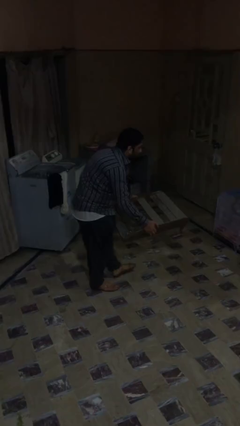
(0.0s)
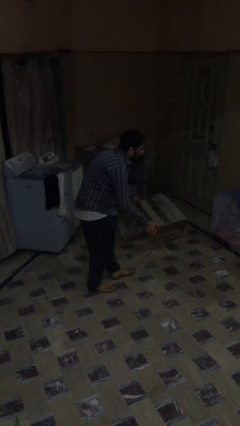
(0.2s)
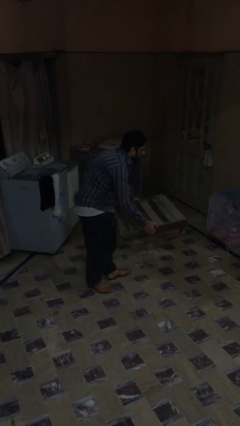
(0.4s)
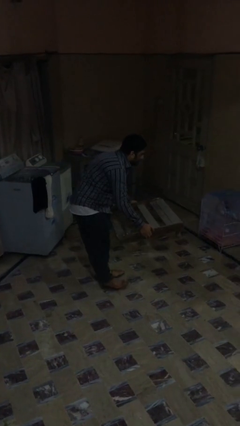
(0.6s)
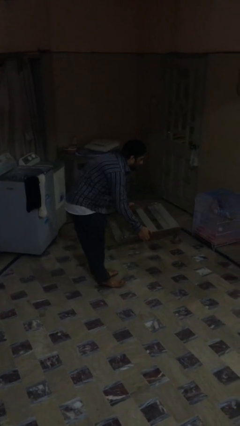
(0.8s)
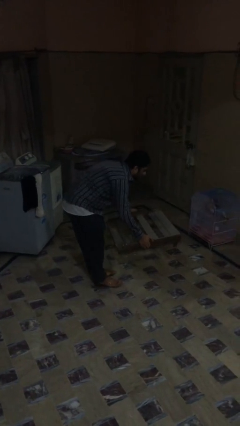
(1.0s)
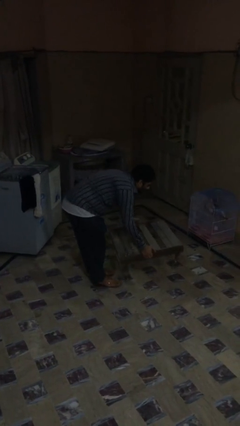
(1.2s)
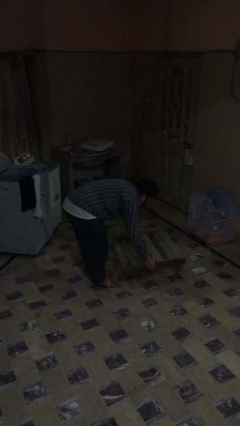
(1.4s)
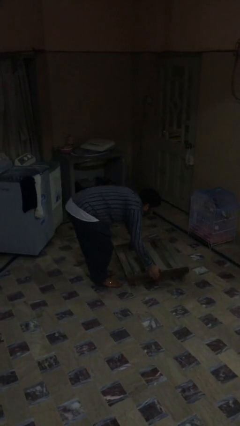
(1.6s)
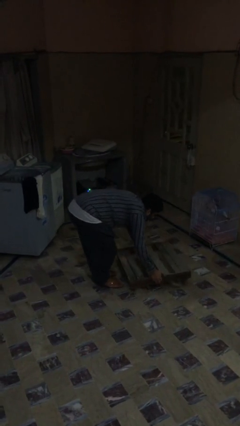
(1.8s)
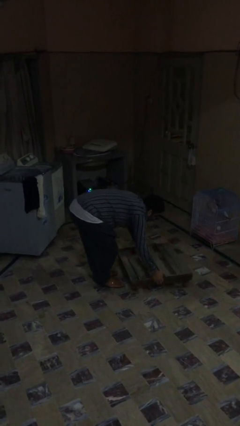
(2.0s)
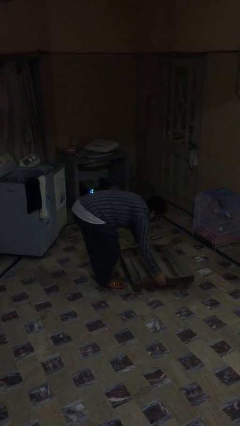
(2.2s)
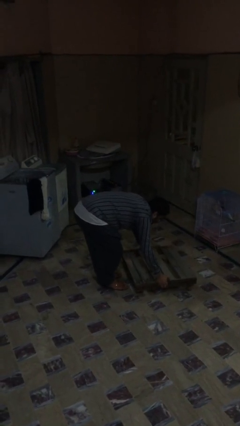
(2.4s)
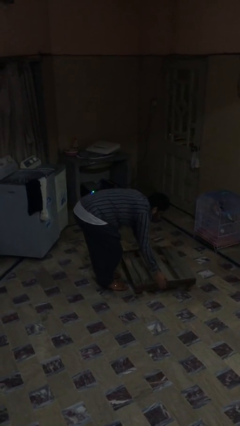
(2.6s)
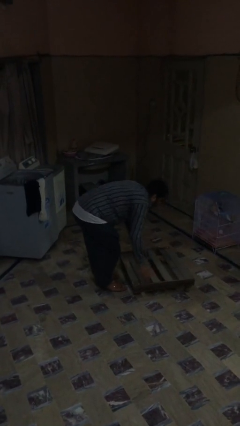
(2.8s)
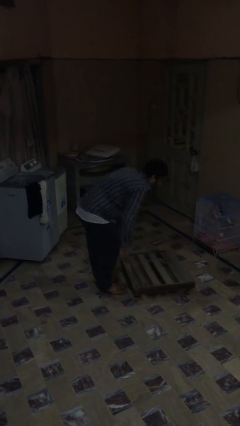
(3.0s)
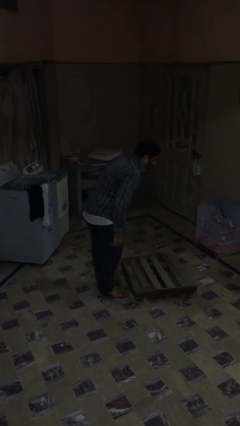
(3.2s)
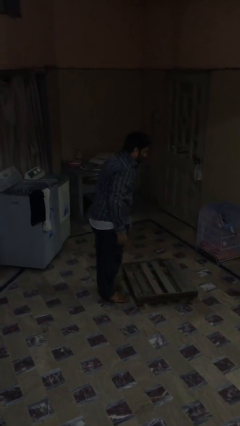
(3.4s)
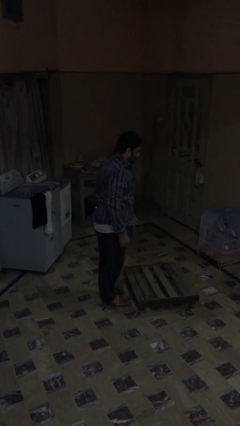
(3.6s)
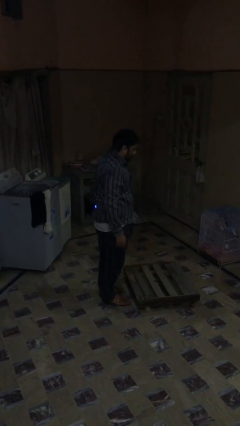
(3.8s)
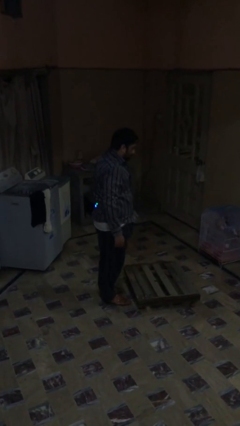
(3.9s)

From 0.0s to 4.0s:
person puts down object on floor

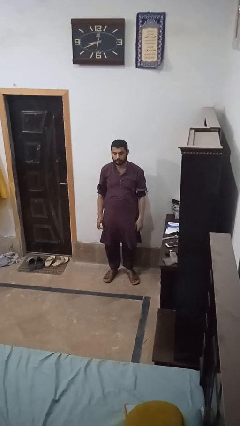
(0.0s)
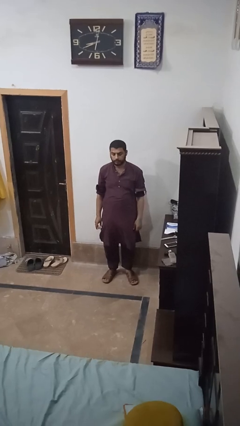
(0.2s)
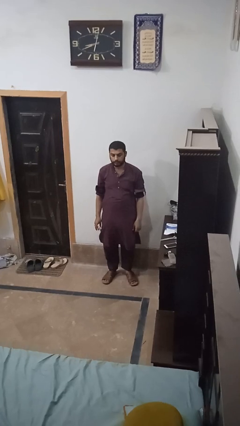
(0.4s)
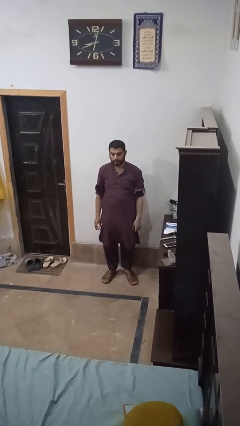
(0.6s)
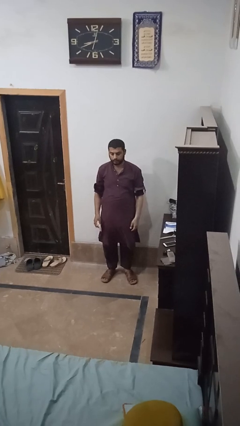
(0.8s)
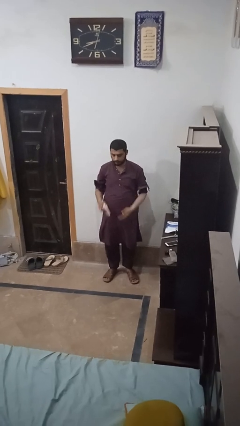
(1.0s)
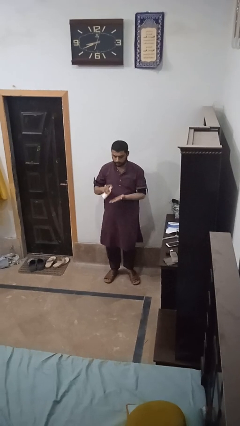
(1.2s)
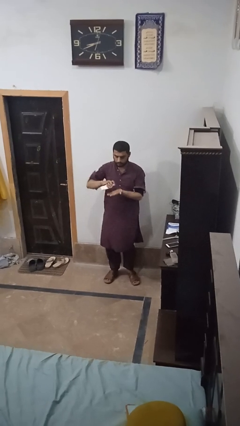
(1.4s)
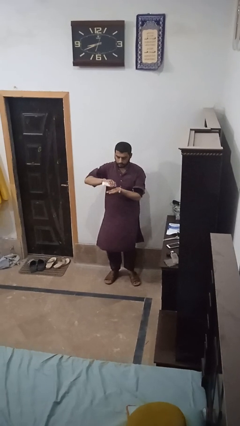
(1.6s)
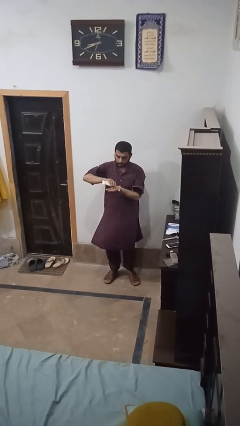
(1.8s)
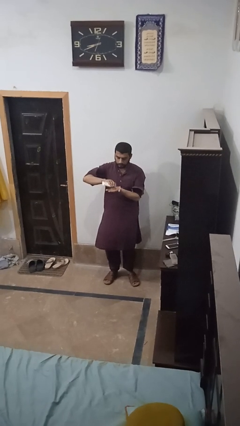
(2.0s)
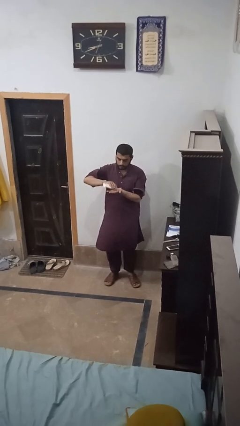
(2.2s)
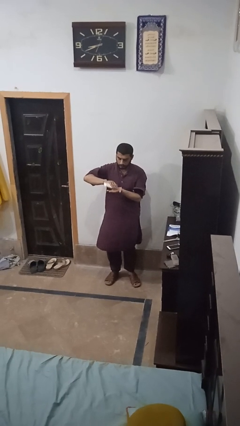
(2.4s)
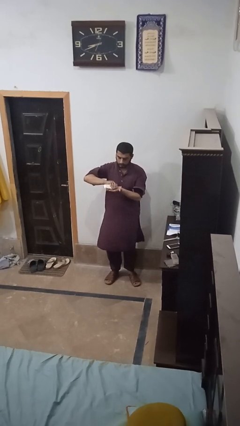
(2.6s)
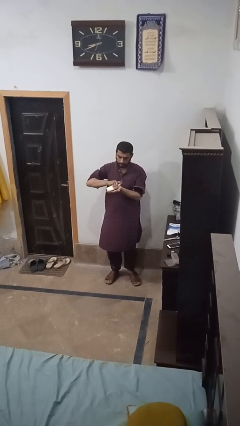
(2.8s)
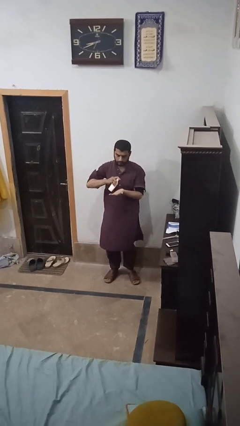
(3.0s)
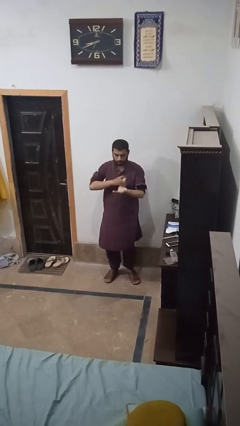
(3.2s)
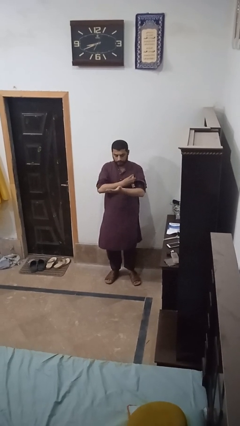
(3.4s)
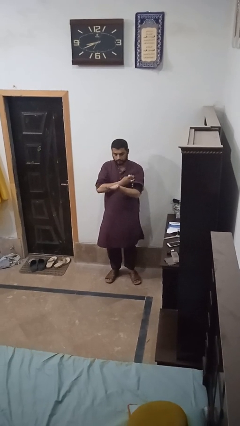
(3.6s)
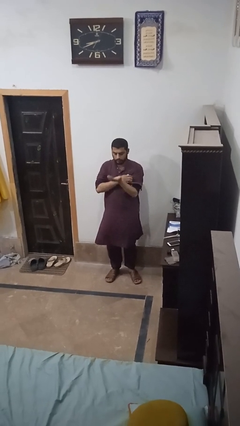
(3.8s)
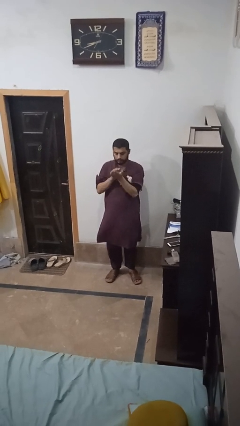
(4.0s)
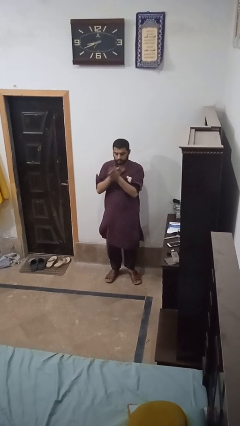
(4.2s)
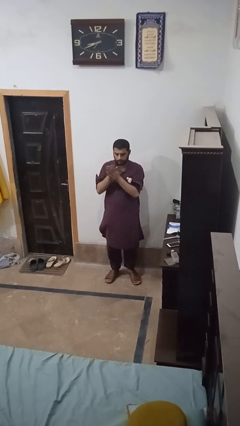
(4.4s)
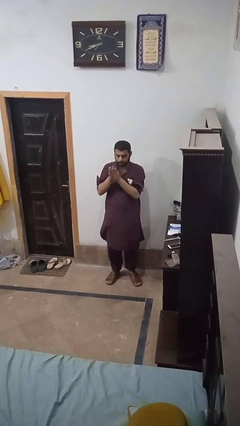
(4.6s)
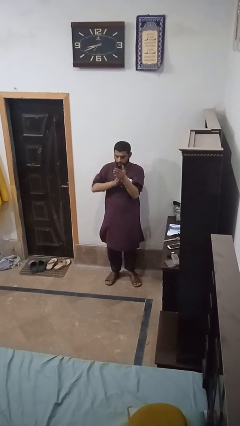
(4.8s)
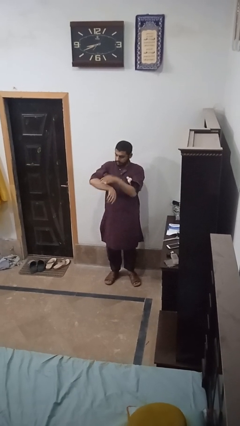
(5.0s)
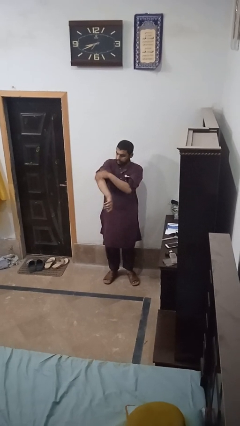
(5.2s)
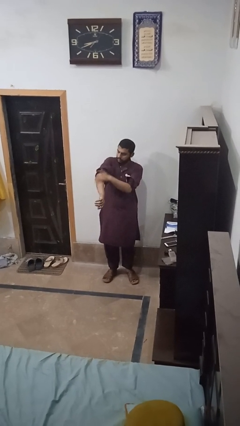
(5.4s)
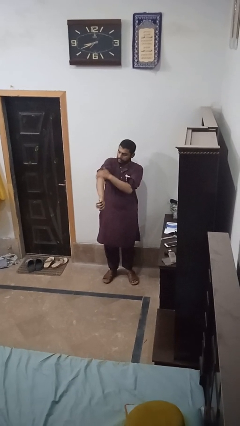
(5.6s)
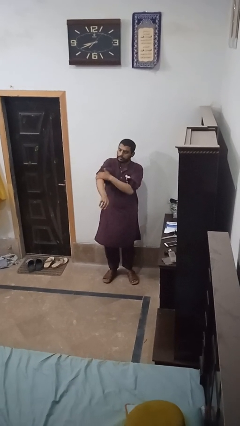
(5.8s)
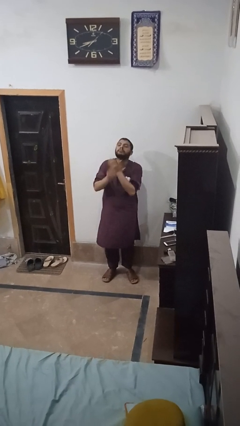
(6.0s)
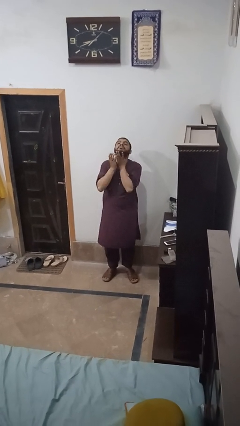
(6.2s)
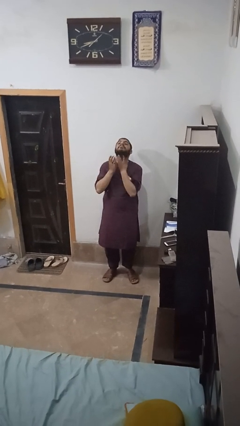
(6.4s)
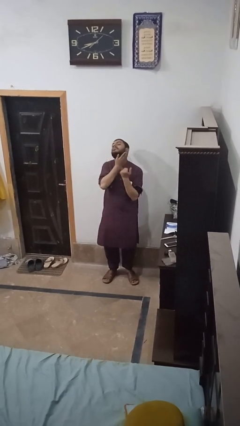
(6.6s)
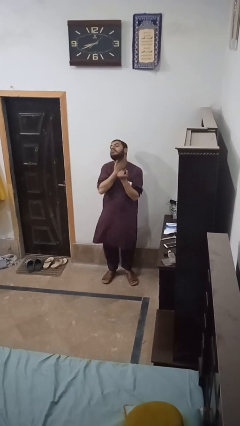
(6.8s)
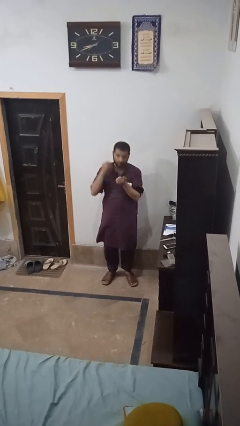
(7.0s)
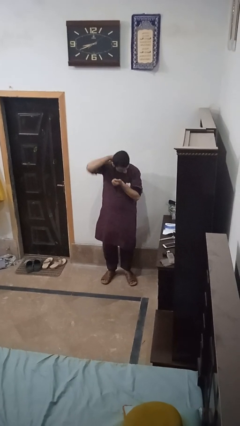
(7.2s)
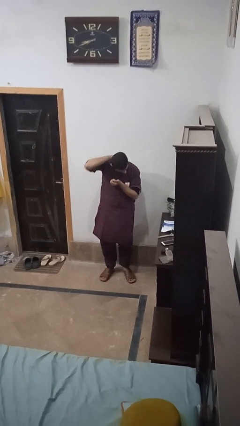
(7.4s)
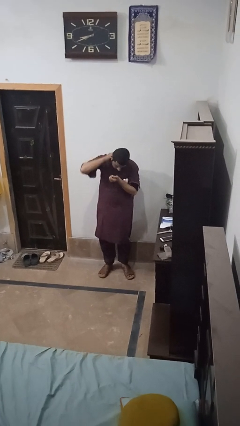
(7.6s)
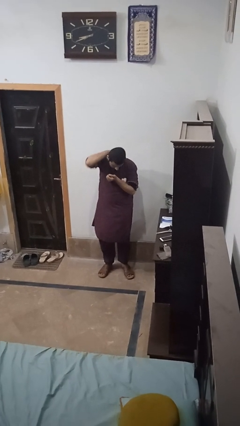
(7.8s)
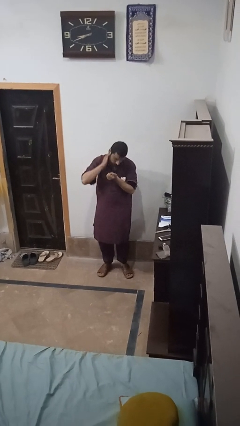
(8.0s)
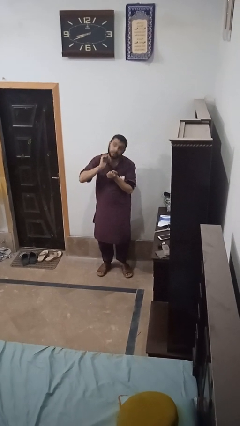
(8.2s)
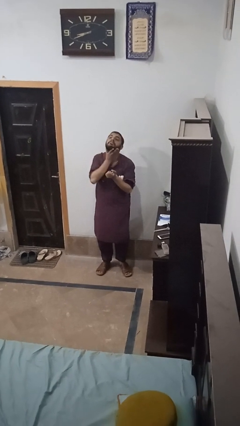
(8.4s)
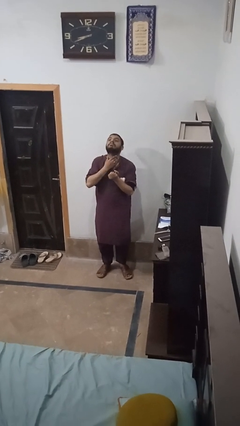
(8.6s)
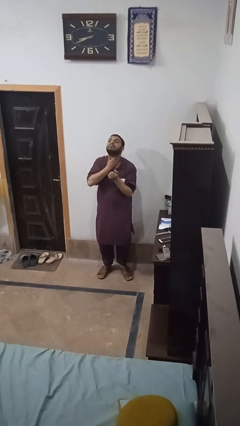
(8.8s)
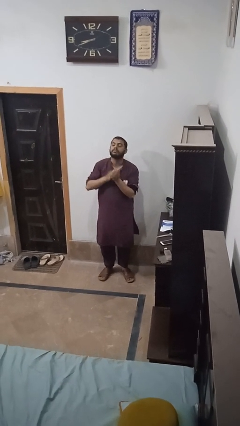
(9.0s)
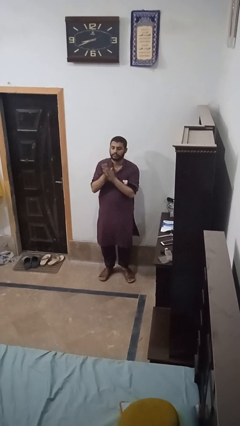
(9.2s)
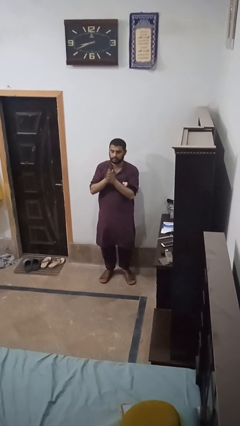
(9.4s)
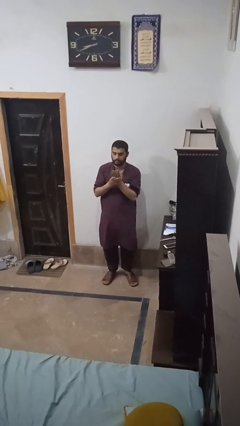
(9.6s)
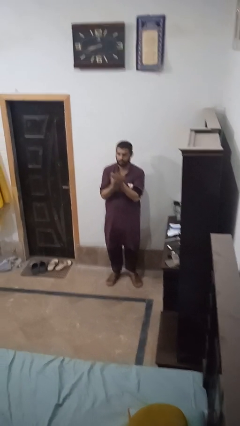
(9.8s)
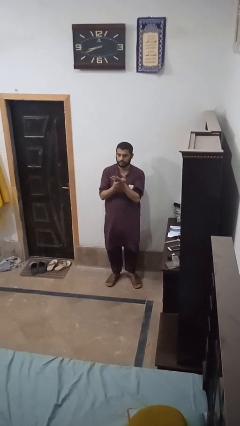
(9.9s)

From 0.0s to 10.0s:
person applies sunscreen

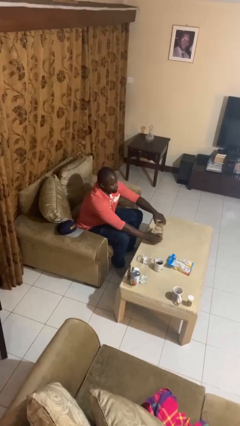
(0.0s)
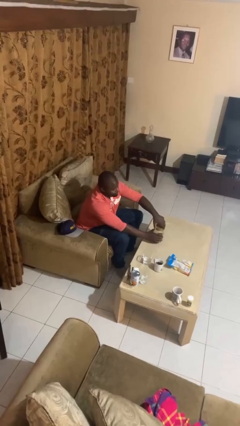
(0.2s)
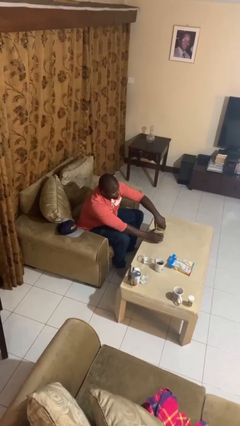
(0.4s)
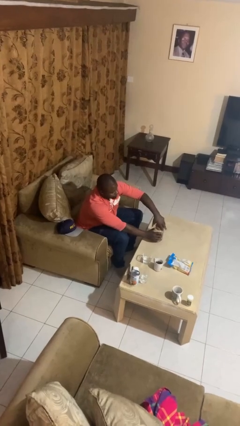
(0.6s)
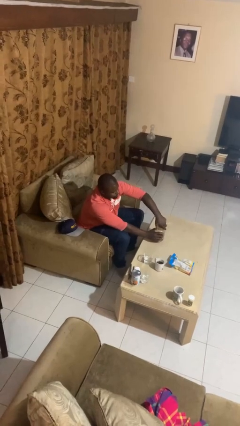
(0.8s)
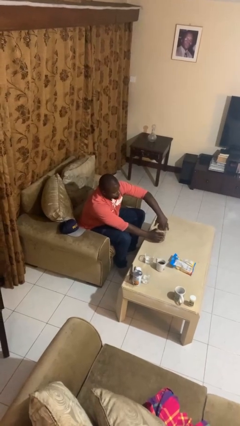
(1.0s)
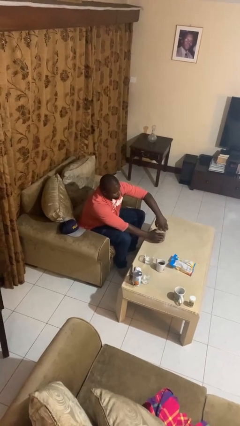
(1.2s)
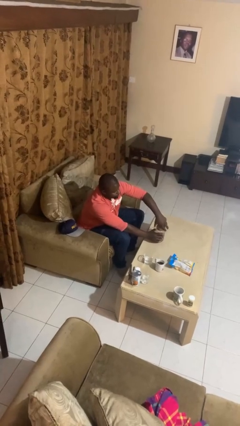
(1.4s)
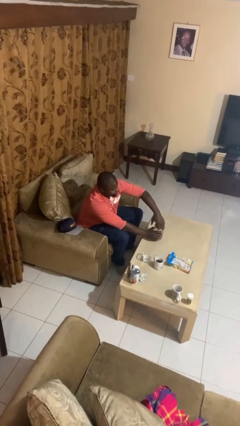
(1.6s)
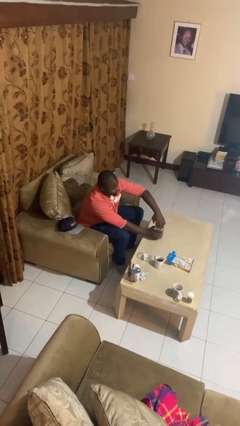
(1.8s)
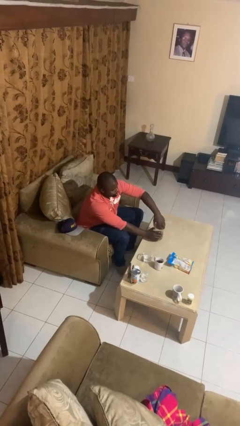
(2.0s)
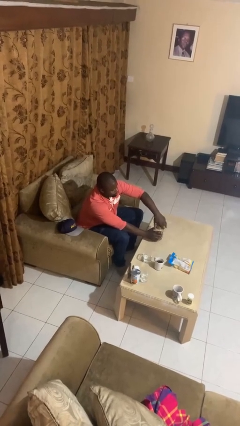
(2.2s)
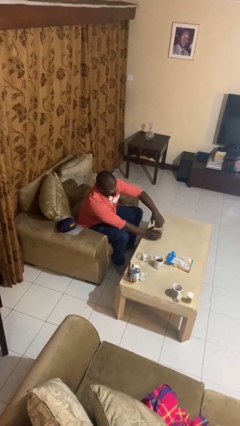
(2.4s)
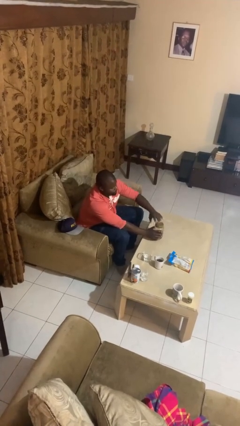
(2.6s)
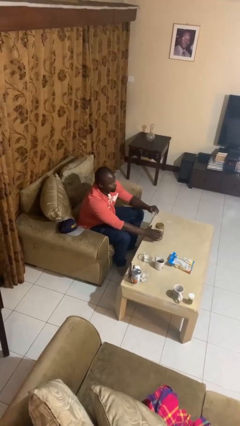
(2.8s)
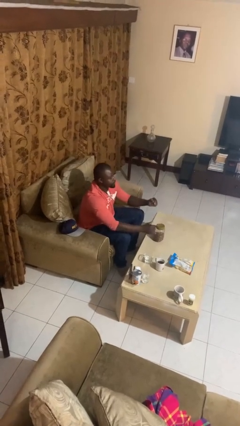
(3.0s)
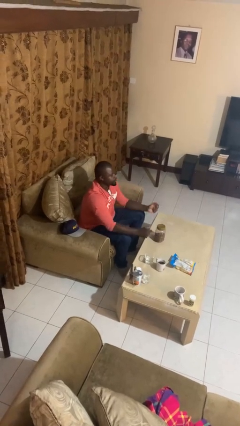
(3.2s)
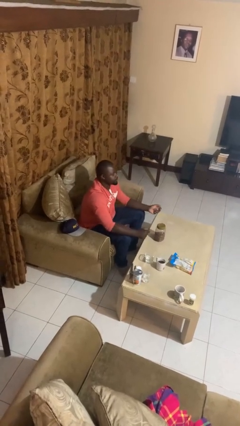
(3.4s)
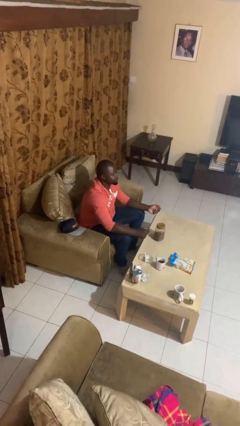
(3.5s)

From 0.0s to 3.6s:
person closes jar

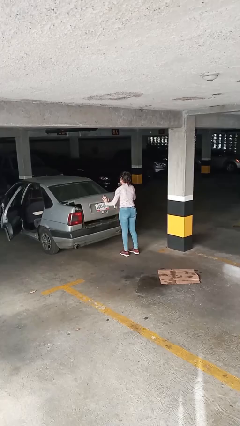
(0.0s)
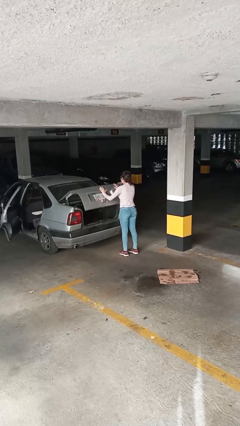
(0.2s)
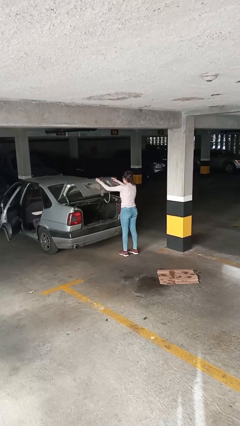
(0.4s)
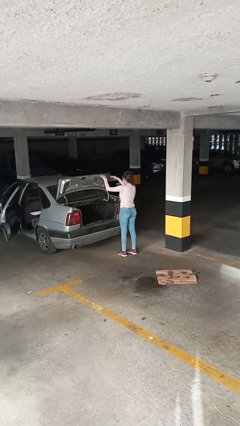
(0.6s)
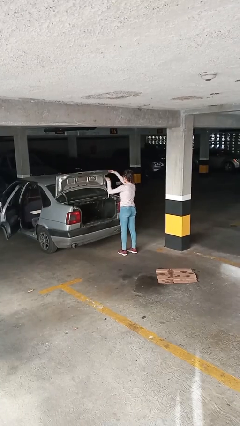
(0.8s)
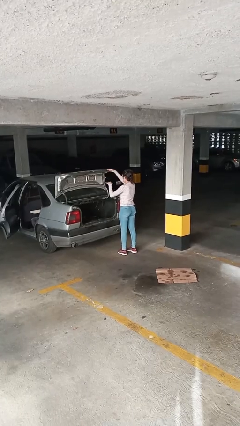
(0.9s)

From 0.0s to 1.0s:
person opens car trunk
